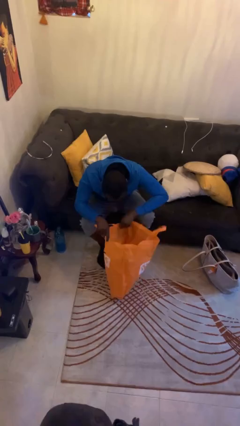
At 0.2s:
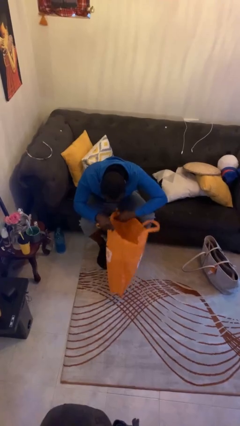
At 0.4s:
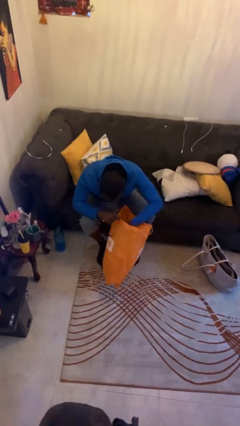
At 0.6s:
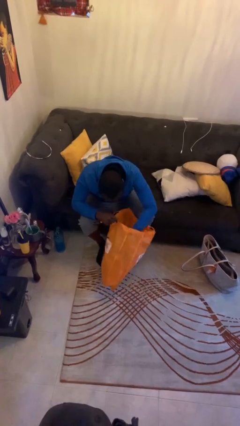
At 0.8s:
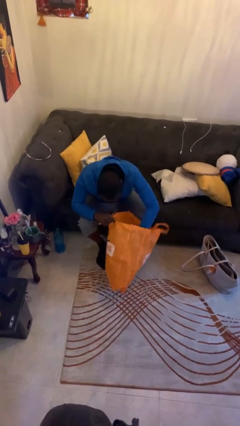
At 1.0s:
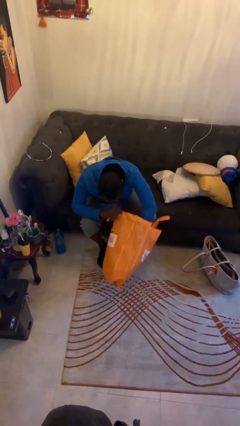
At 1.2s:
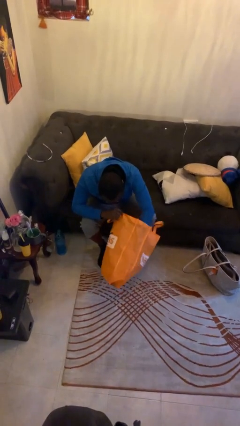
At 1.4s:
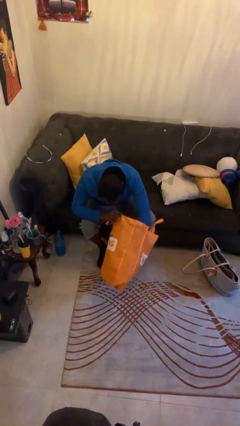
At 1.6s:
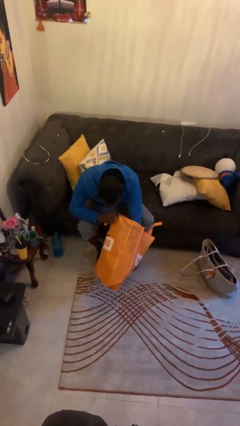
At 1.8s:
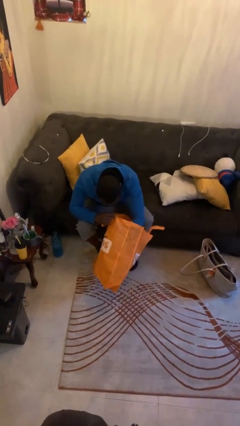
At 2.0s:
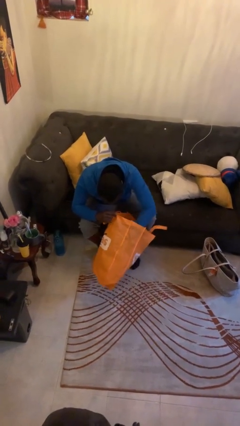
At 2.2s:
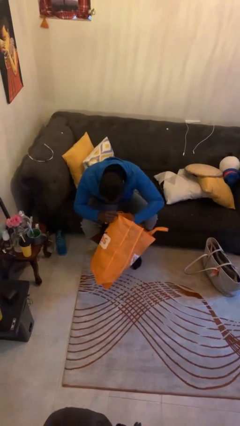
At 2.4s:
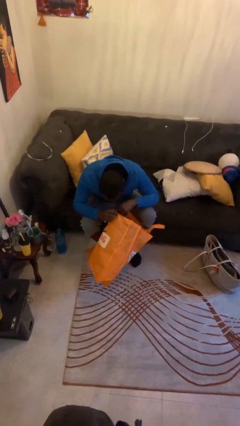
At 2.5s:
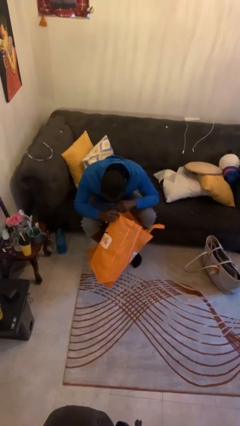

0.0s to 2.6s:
person searches in bag

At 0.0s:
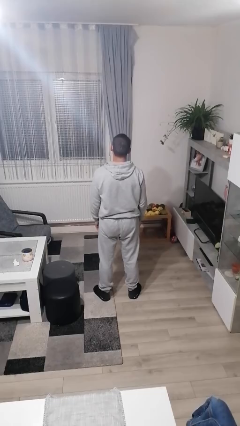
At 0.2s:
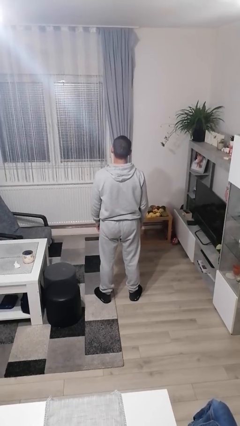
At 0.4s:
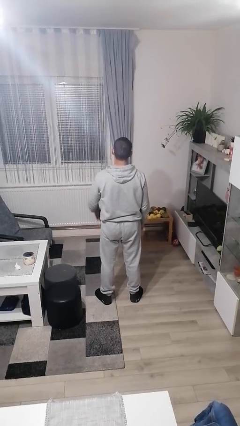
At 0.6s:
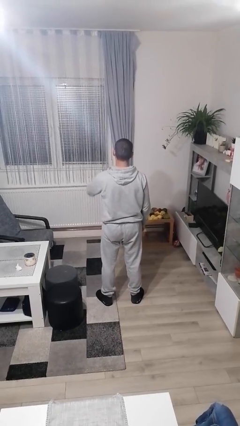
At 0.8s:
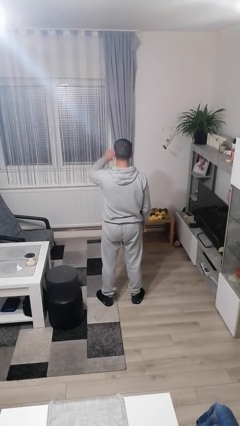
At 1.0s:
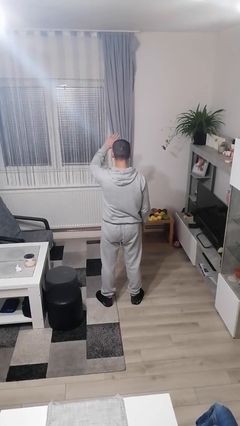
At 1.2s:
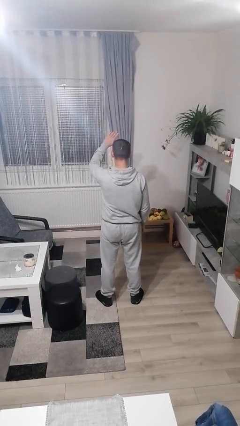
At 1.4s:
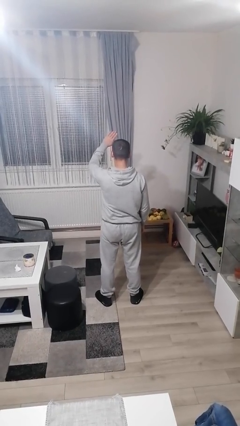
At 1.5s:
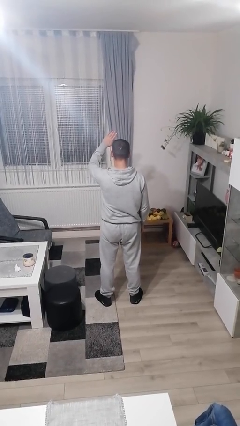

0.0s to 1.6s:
person salutes

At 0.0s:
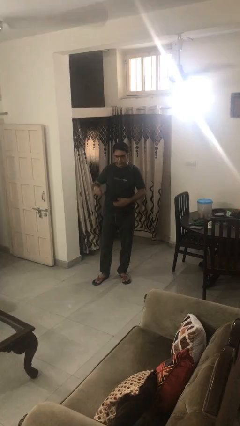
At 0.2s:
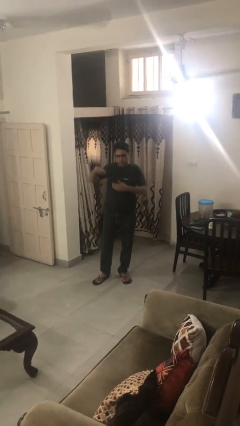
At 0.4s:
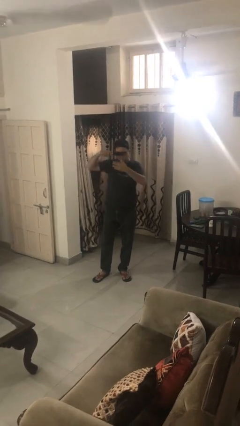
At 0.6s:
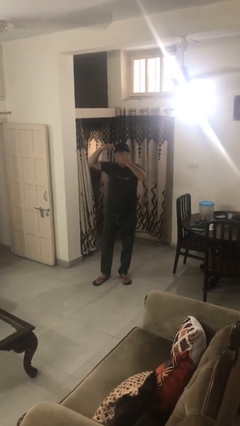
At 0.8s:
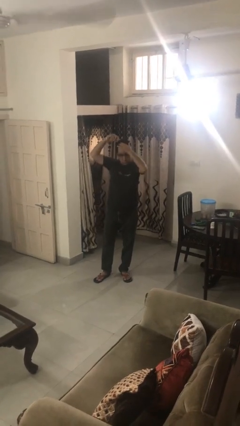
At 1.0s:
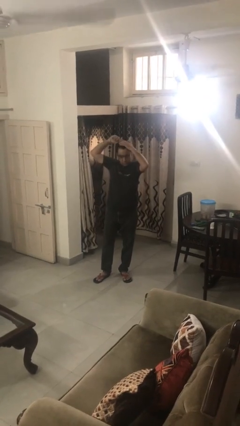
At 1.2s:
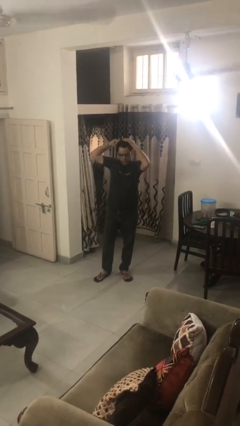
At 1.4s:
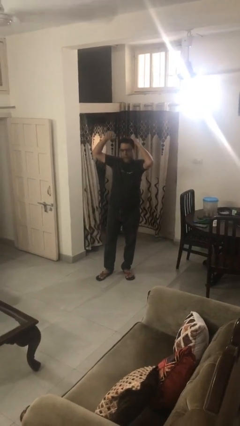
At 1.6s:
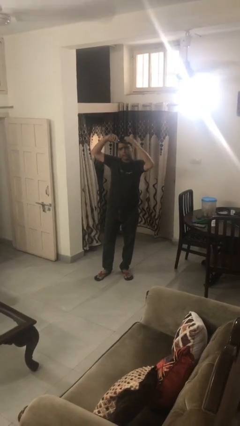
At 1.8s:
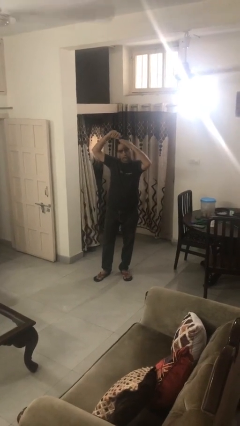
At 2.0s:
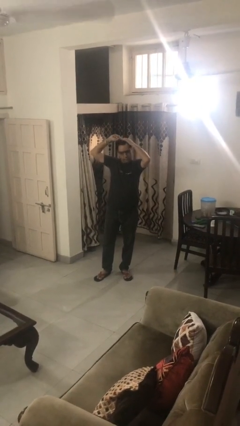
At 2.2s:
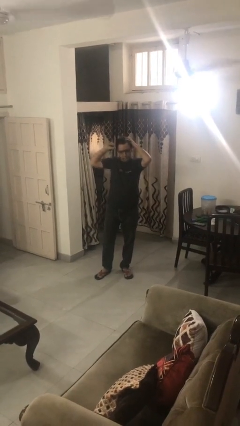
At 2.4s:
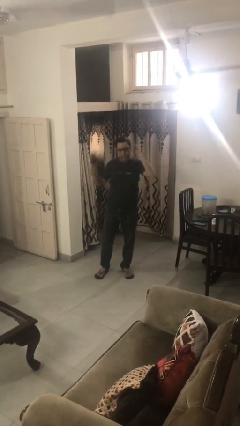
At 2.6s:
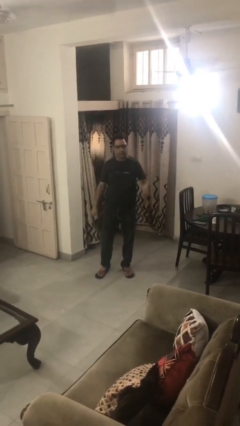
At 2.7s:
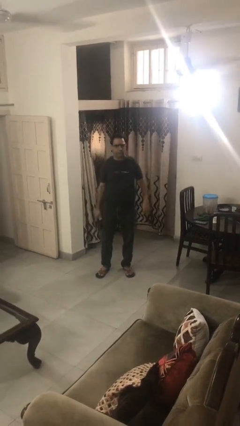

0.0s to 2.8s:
person brushes hair

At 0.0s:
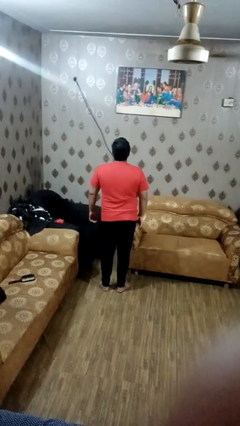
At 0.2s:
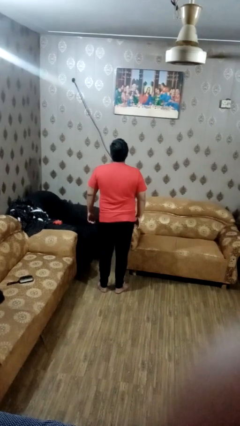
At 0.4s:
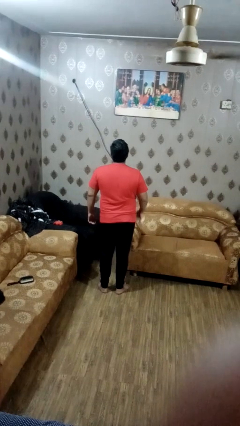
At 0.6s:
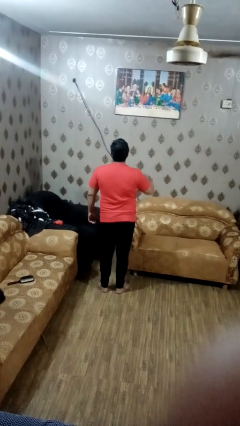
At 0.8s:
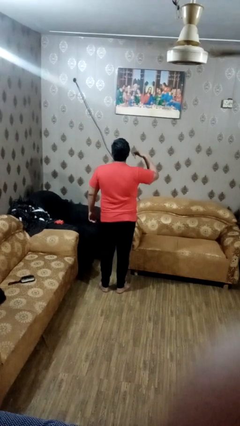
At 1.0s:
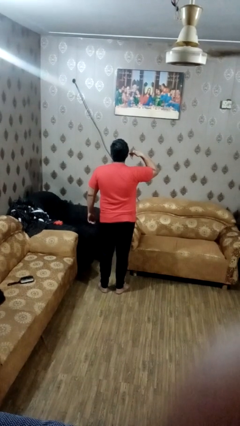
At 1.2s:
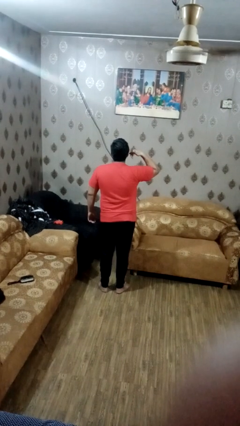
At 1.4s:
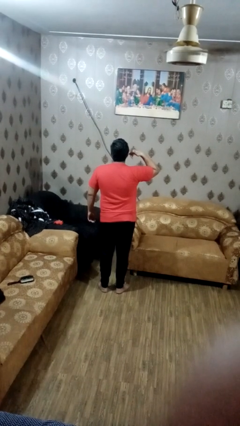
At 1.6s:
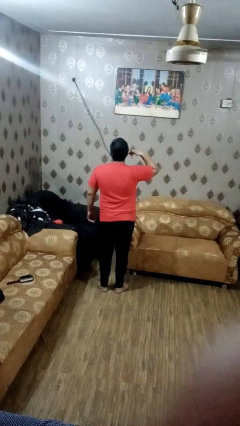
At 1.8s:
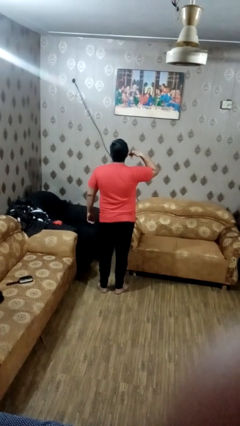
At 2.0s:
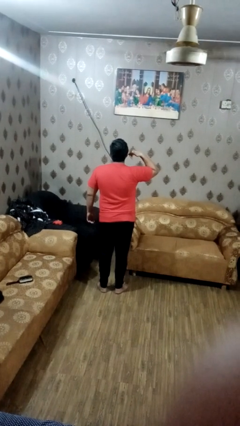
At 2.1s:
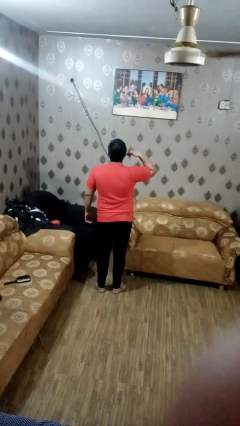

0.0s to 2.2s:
person gestures call me

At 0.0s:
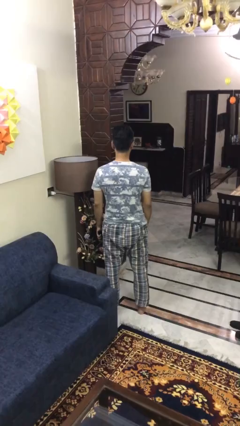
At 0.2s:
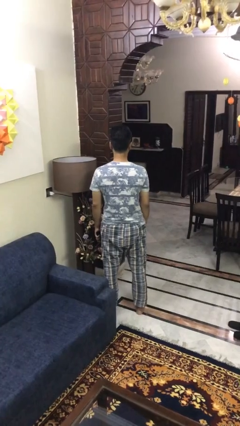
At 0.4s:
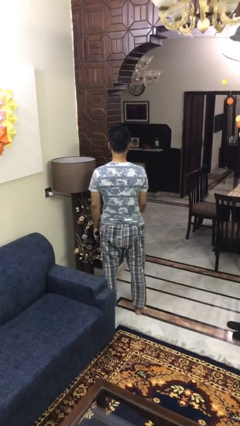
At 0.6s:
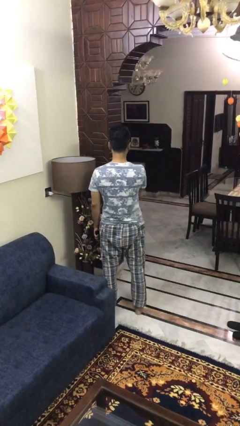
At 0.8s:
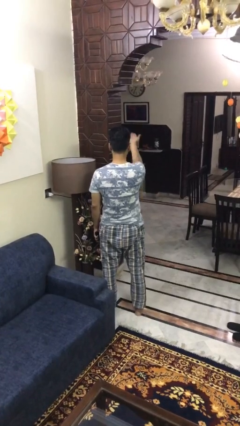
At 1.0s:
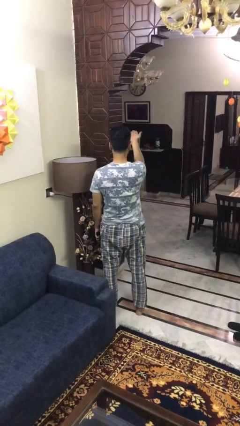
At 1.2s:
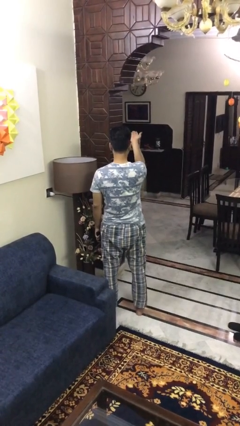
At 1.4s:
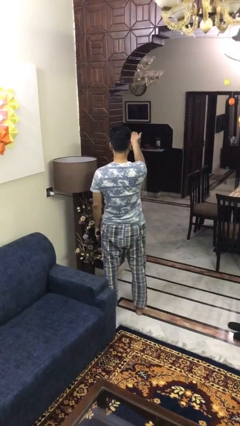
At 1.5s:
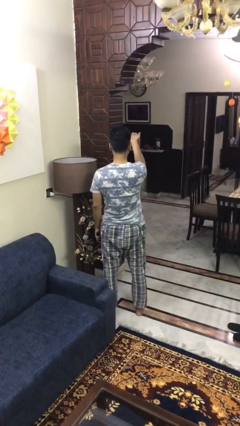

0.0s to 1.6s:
person gestures swipe up

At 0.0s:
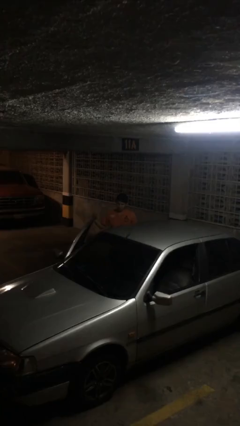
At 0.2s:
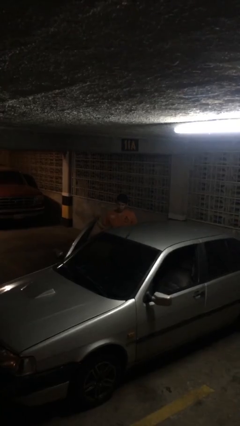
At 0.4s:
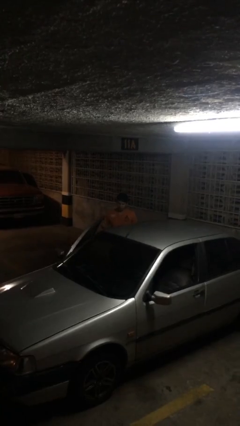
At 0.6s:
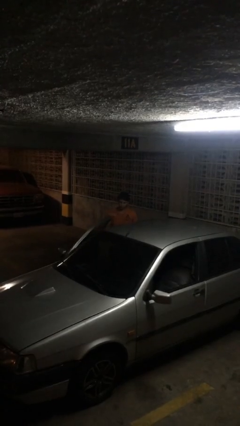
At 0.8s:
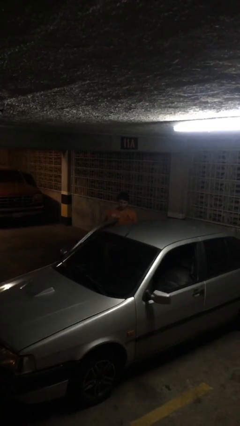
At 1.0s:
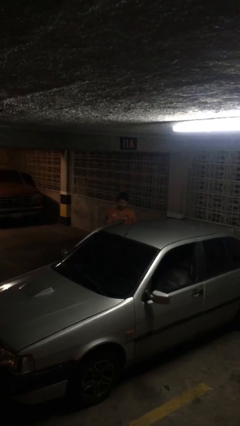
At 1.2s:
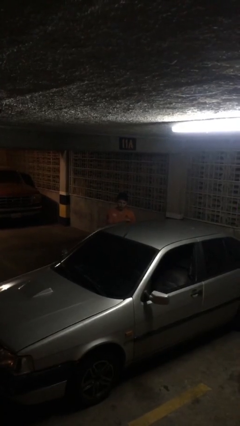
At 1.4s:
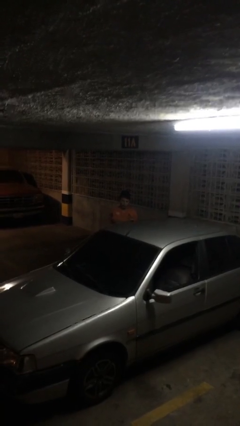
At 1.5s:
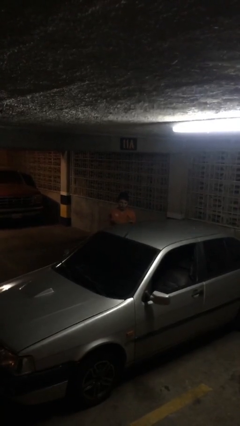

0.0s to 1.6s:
person closes car door

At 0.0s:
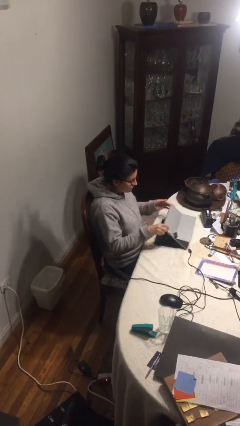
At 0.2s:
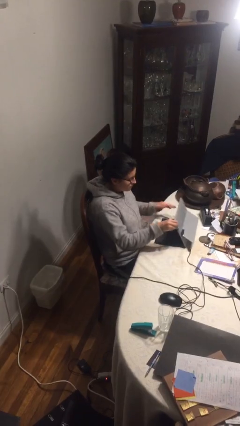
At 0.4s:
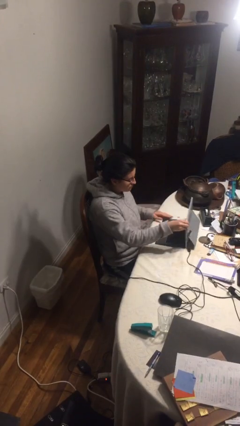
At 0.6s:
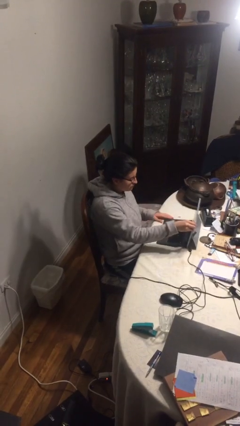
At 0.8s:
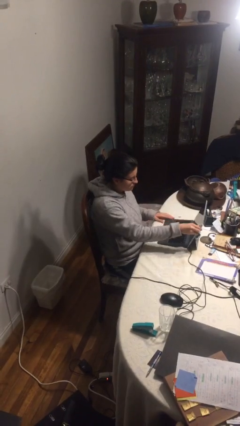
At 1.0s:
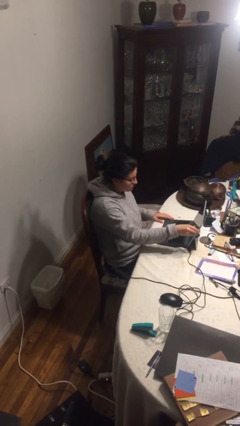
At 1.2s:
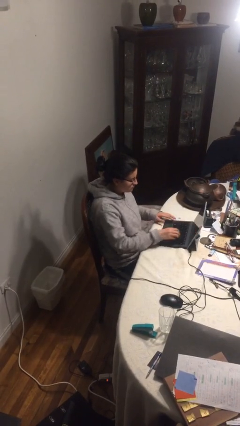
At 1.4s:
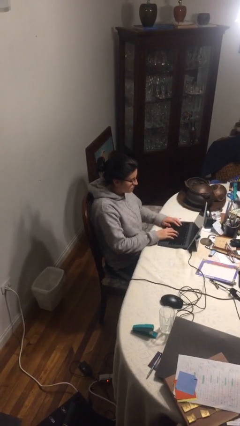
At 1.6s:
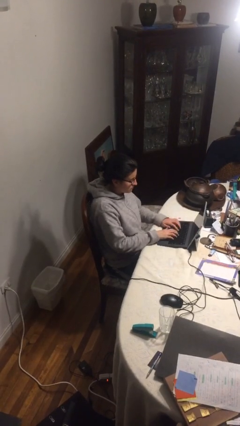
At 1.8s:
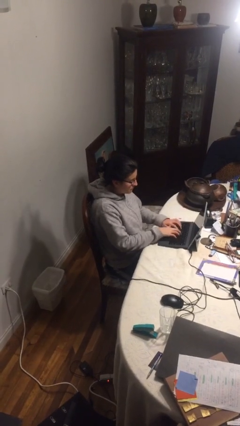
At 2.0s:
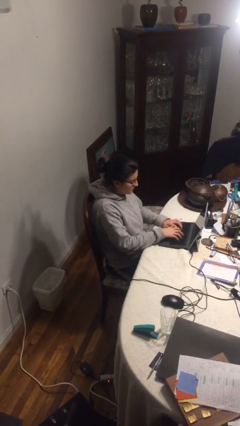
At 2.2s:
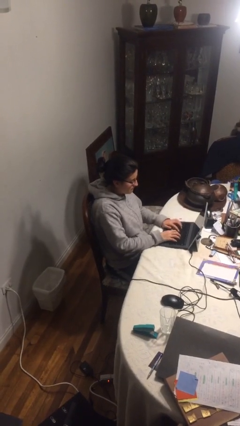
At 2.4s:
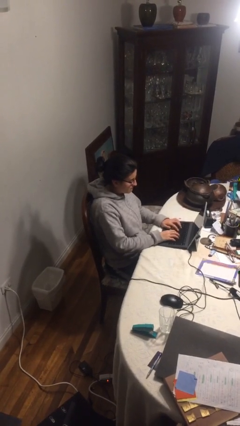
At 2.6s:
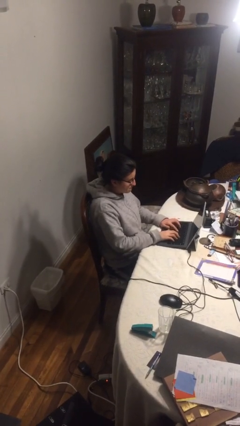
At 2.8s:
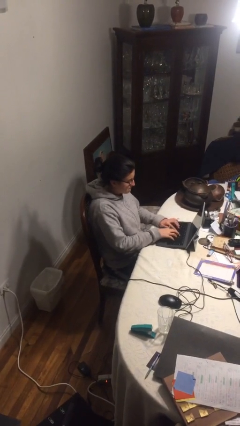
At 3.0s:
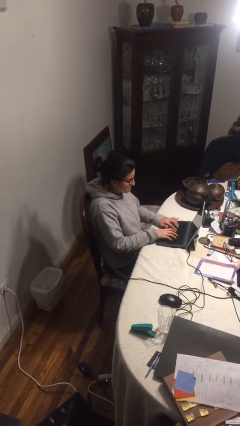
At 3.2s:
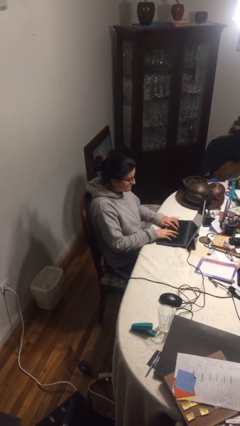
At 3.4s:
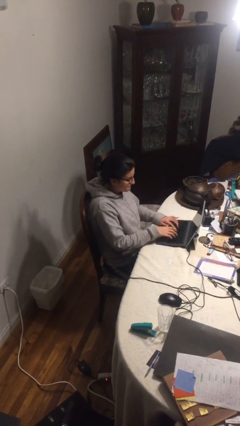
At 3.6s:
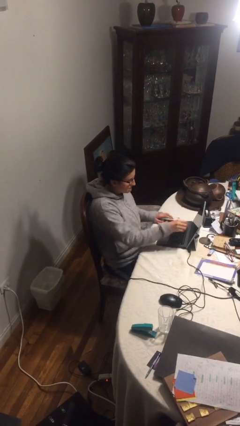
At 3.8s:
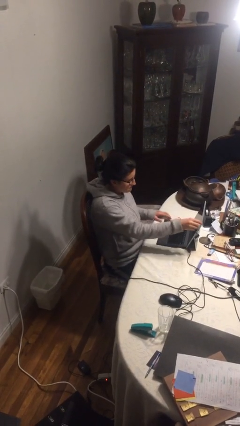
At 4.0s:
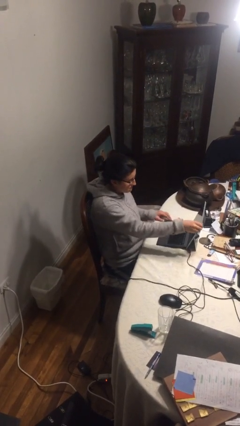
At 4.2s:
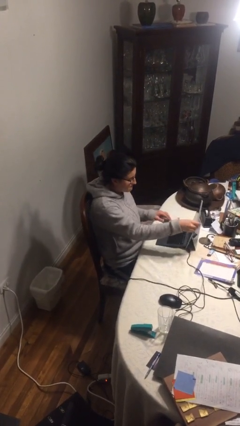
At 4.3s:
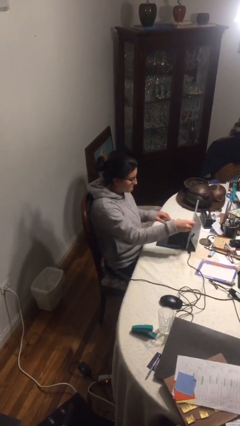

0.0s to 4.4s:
person interacts with laptop
